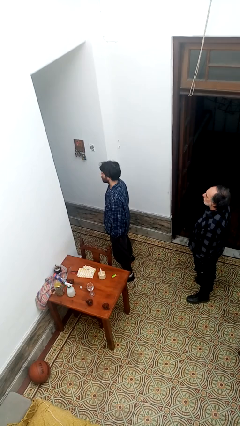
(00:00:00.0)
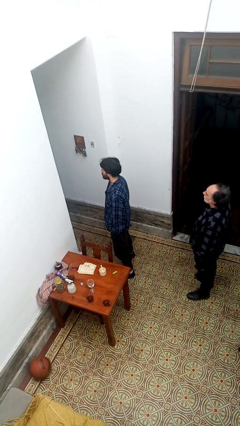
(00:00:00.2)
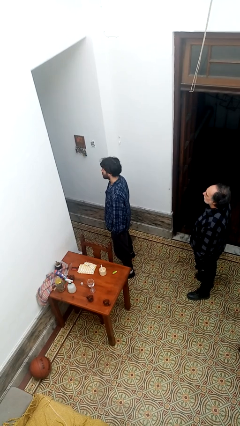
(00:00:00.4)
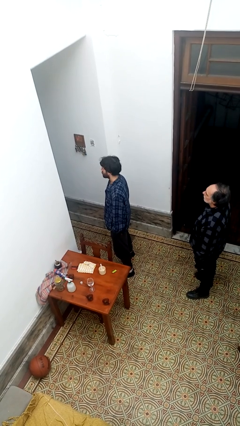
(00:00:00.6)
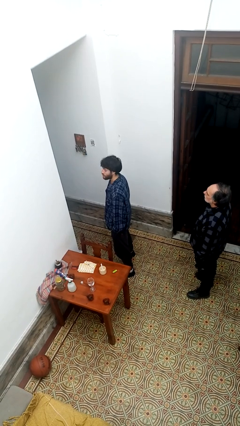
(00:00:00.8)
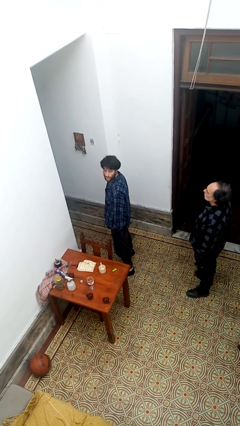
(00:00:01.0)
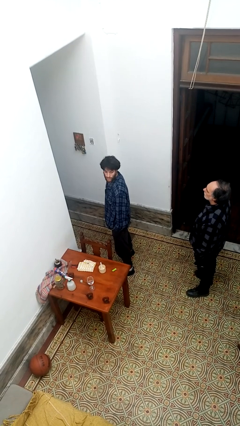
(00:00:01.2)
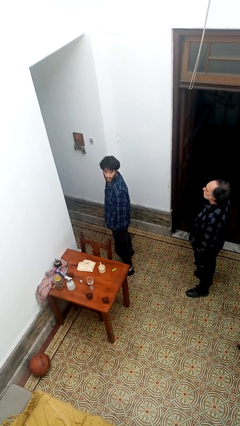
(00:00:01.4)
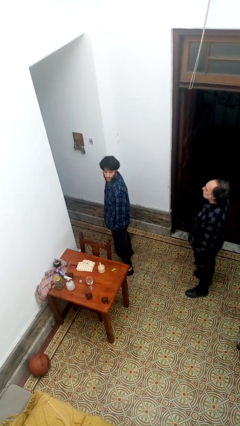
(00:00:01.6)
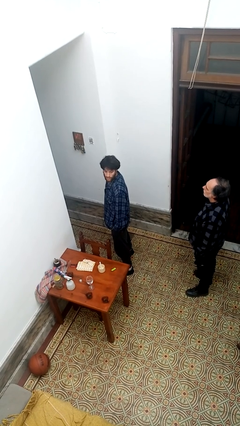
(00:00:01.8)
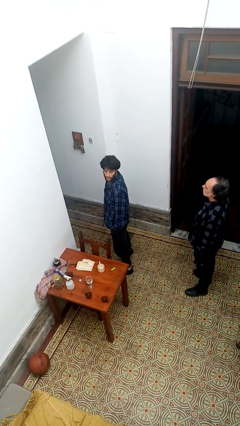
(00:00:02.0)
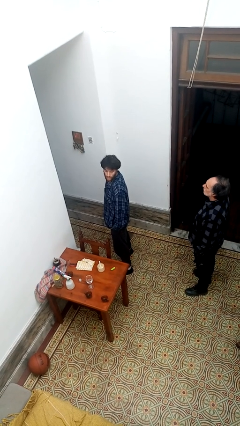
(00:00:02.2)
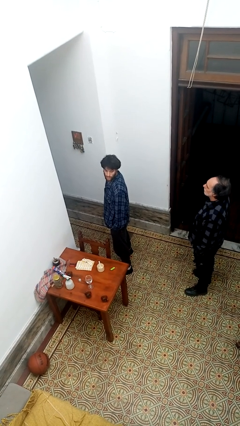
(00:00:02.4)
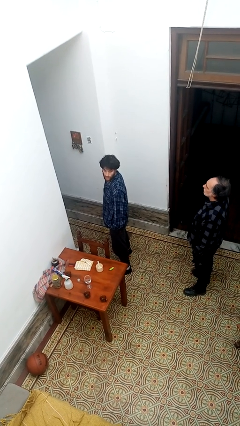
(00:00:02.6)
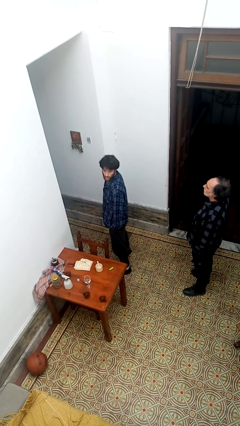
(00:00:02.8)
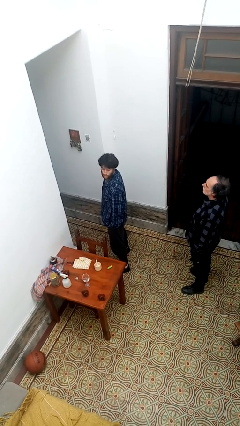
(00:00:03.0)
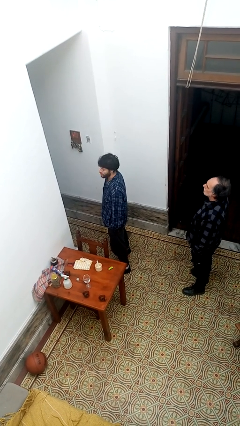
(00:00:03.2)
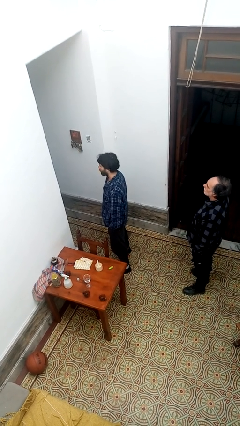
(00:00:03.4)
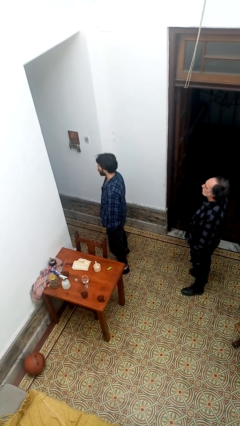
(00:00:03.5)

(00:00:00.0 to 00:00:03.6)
person looks over shoulder

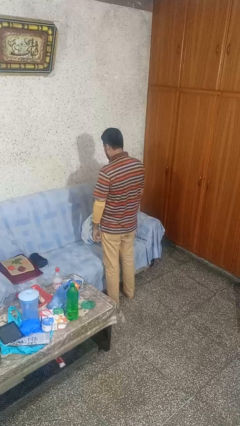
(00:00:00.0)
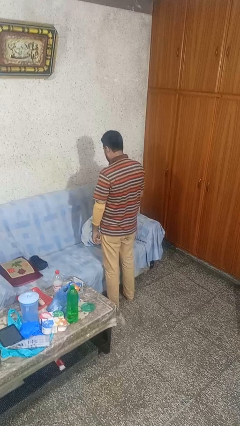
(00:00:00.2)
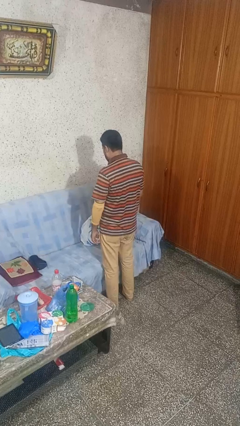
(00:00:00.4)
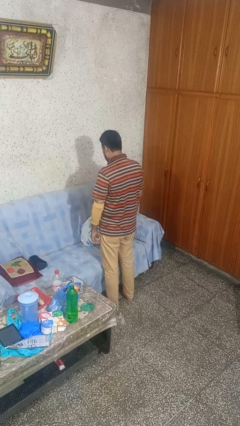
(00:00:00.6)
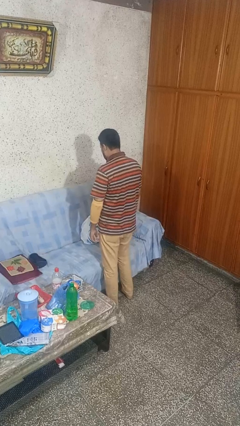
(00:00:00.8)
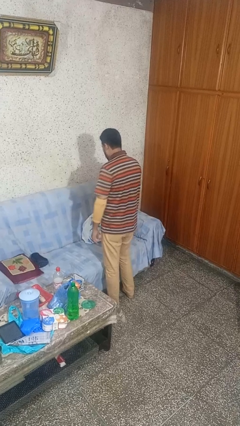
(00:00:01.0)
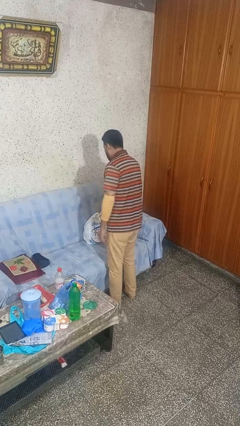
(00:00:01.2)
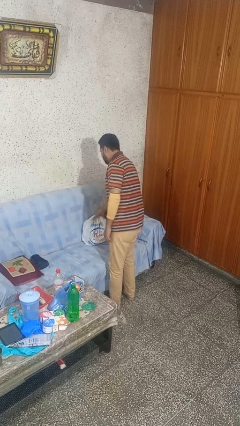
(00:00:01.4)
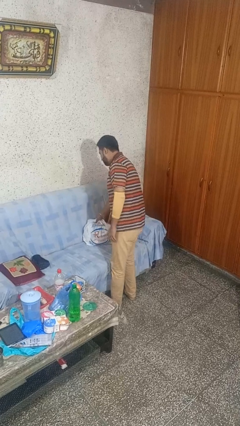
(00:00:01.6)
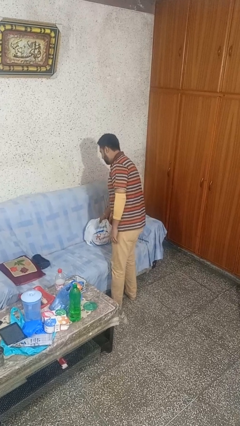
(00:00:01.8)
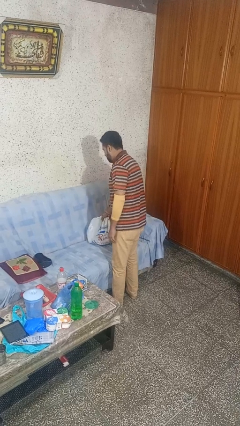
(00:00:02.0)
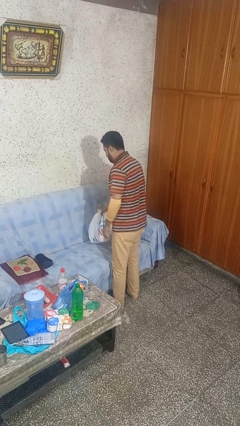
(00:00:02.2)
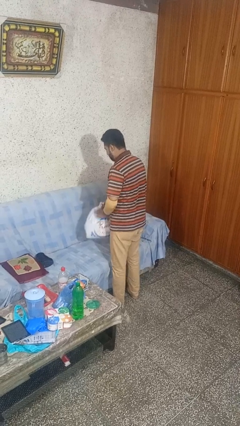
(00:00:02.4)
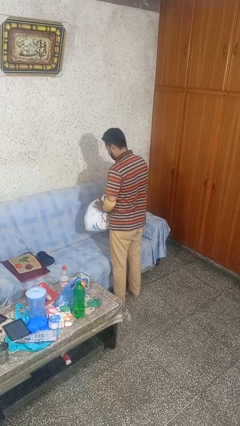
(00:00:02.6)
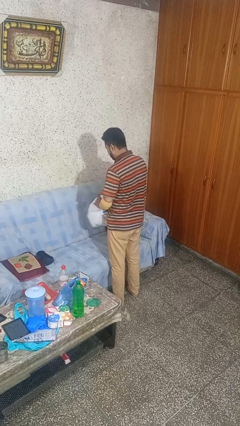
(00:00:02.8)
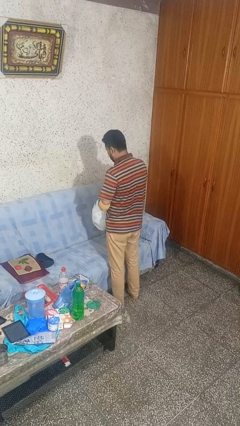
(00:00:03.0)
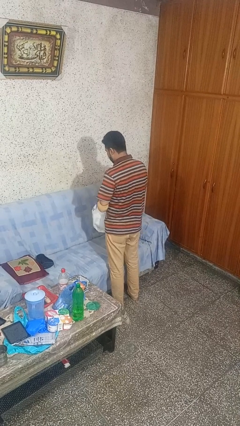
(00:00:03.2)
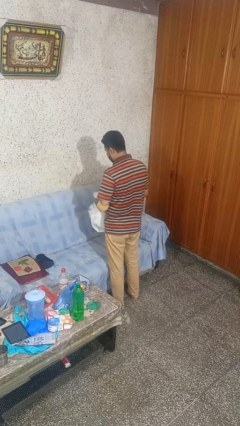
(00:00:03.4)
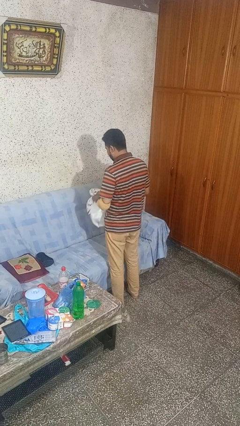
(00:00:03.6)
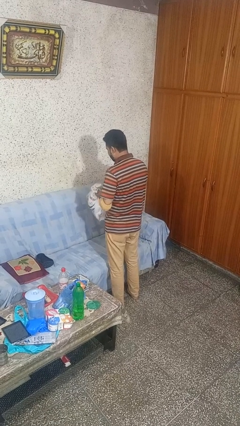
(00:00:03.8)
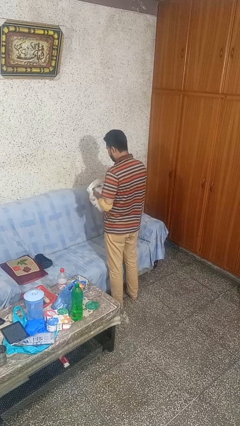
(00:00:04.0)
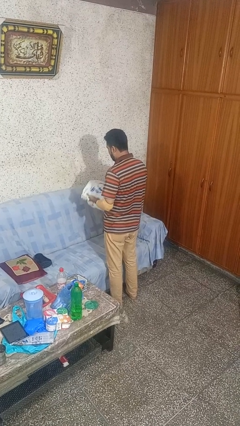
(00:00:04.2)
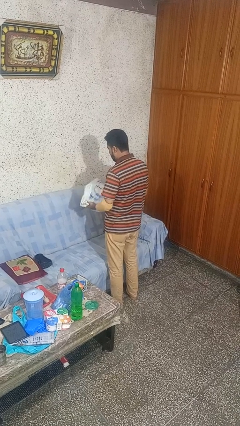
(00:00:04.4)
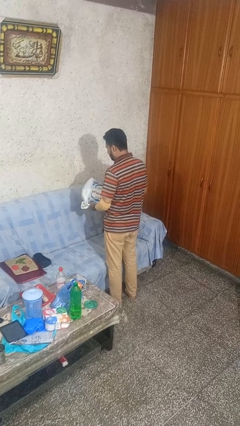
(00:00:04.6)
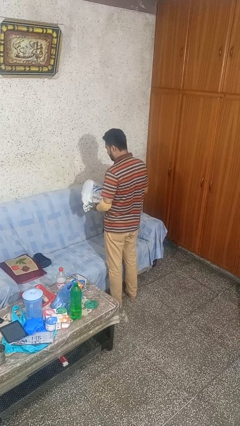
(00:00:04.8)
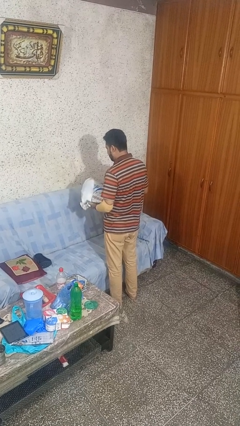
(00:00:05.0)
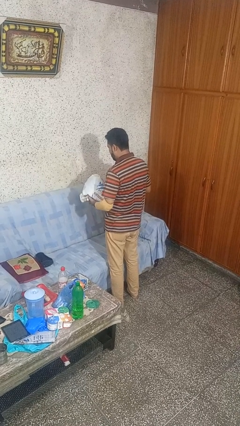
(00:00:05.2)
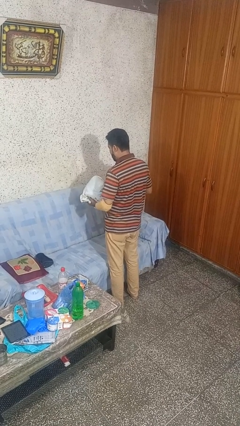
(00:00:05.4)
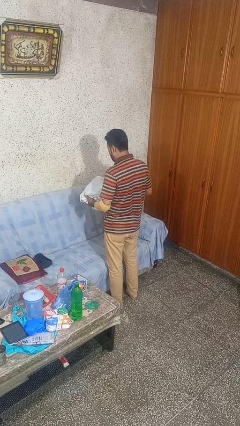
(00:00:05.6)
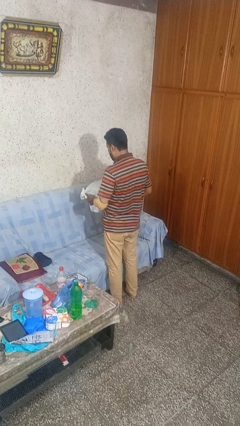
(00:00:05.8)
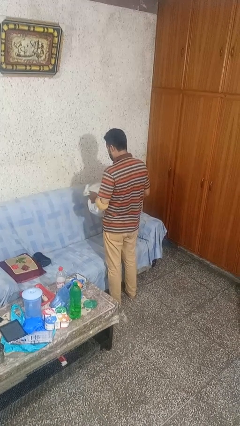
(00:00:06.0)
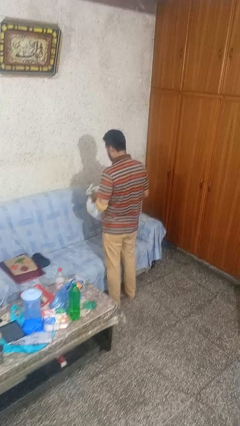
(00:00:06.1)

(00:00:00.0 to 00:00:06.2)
person picks up object from couch

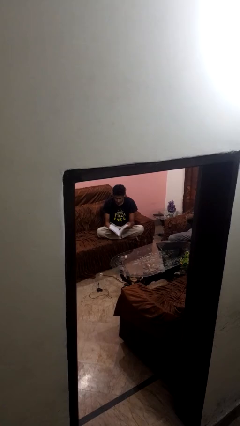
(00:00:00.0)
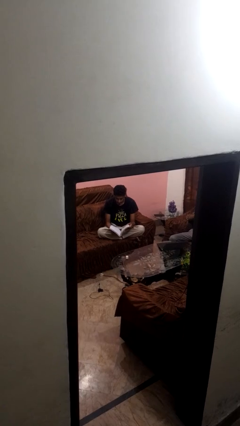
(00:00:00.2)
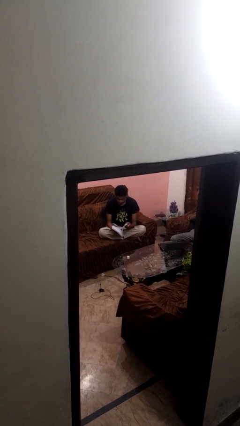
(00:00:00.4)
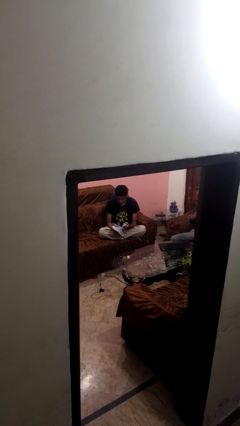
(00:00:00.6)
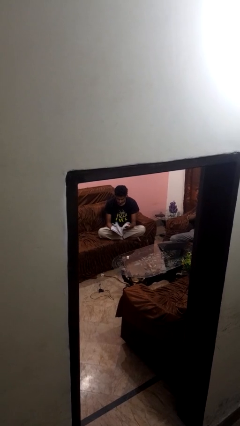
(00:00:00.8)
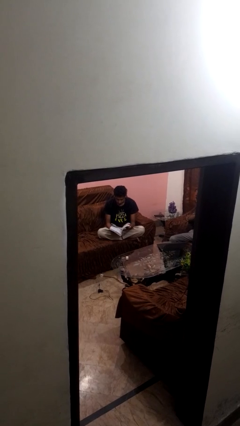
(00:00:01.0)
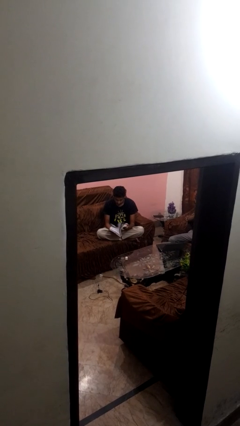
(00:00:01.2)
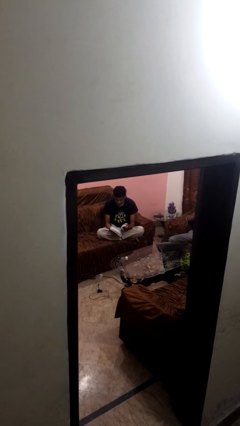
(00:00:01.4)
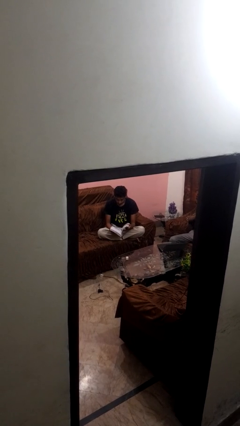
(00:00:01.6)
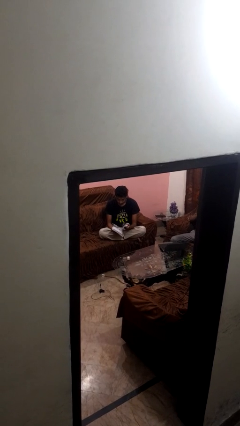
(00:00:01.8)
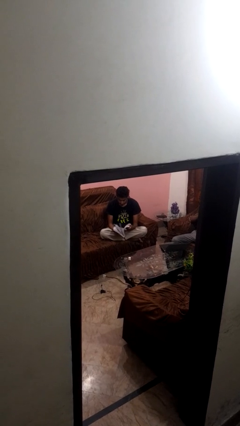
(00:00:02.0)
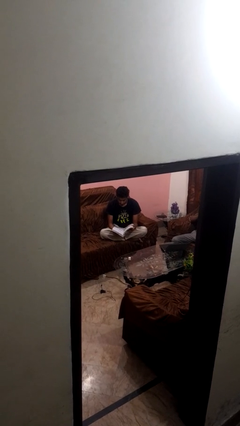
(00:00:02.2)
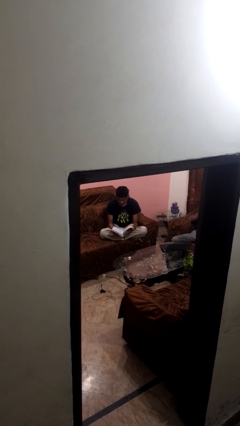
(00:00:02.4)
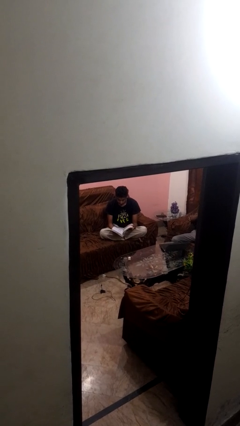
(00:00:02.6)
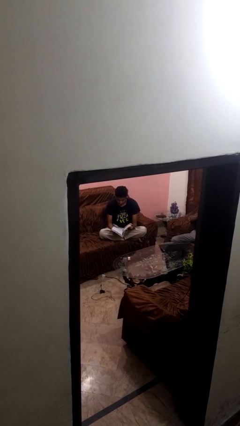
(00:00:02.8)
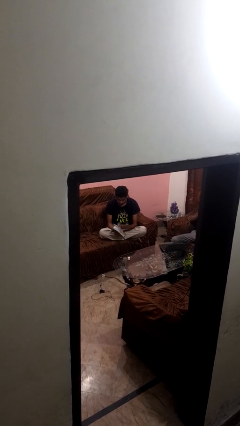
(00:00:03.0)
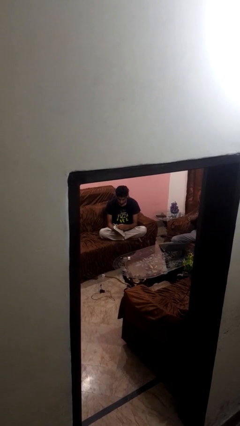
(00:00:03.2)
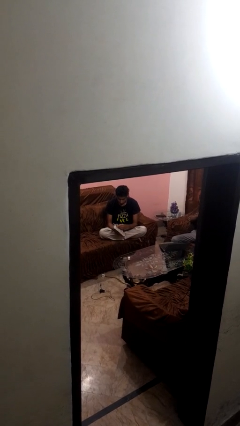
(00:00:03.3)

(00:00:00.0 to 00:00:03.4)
person reads book

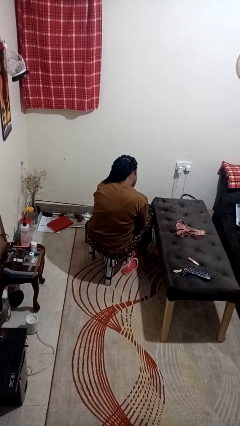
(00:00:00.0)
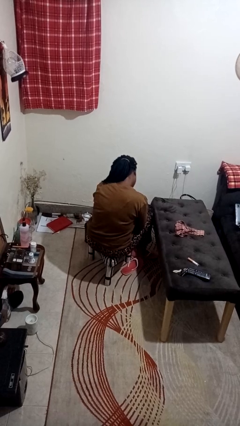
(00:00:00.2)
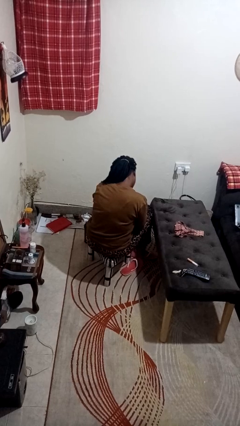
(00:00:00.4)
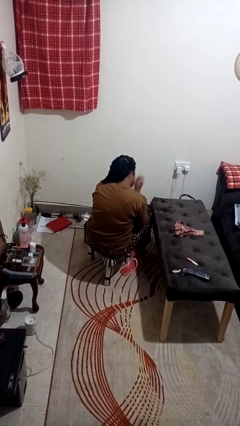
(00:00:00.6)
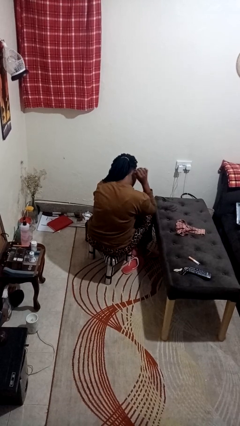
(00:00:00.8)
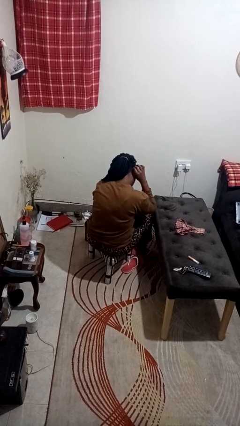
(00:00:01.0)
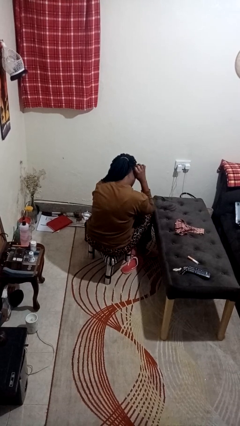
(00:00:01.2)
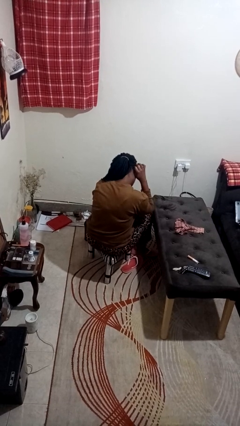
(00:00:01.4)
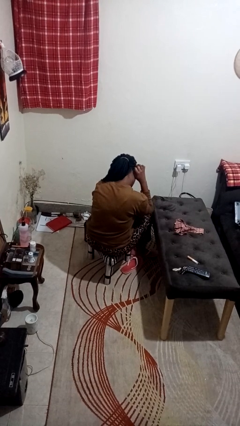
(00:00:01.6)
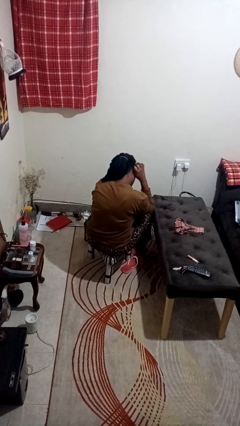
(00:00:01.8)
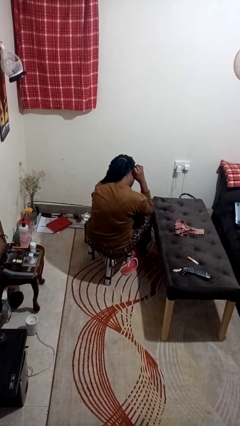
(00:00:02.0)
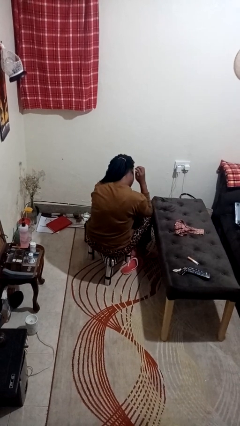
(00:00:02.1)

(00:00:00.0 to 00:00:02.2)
person gestures listen closely

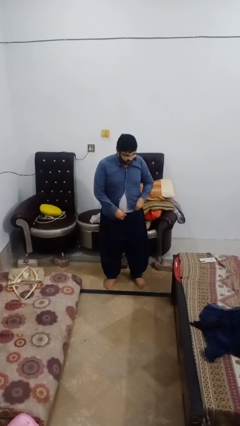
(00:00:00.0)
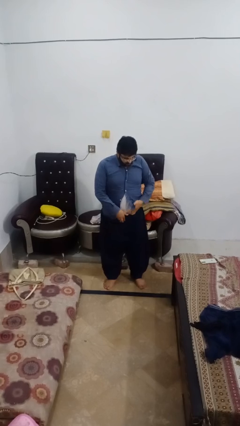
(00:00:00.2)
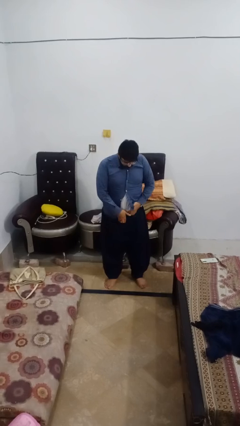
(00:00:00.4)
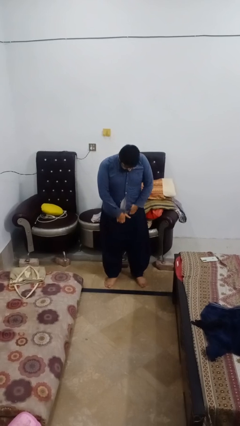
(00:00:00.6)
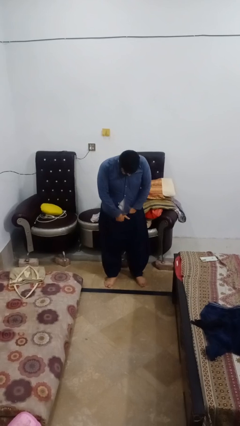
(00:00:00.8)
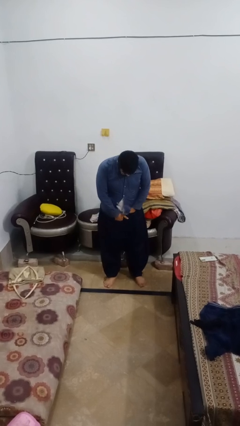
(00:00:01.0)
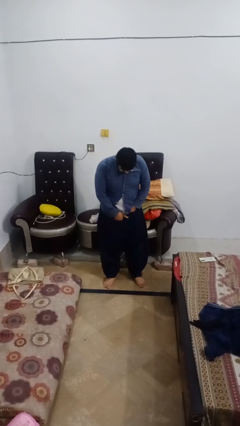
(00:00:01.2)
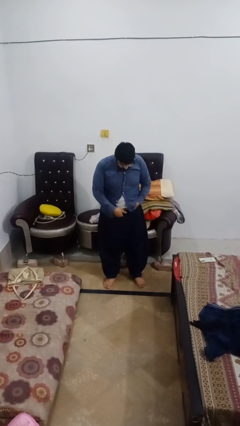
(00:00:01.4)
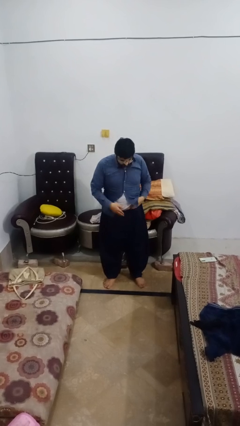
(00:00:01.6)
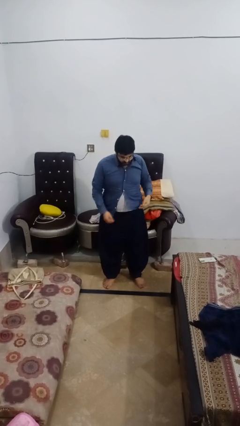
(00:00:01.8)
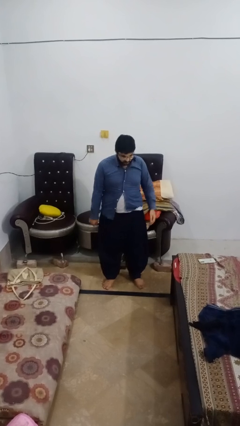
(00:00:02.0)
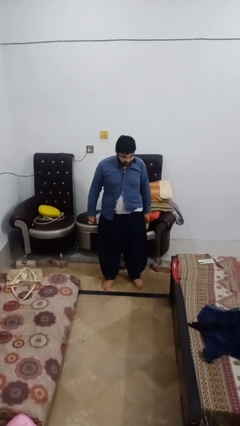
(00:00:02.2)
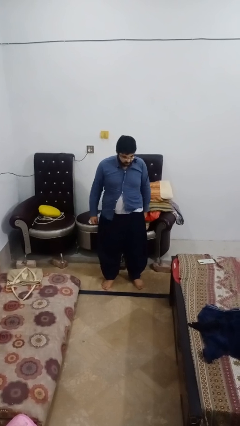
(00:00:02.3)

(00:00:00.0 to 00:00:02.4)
person puts hands in back pockets
